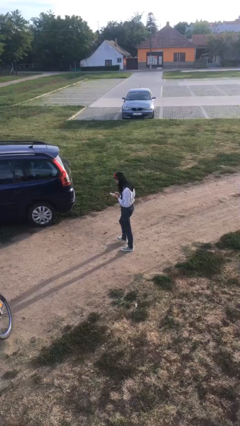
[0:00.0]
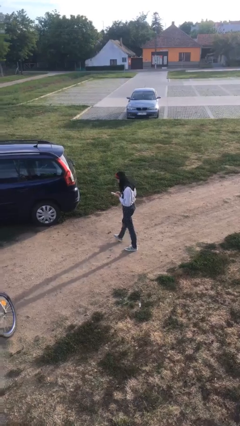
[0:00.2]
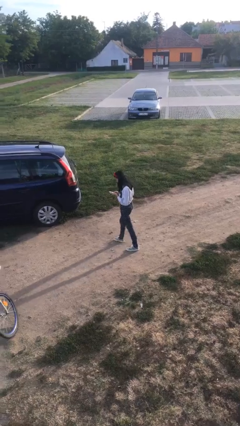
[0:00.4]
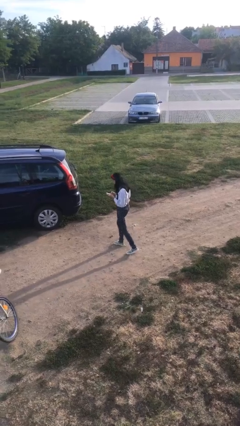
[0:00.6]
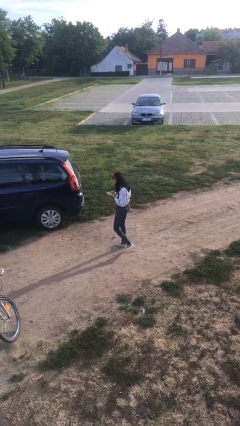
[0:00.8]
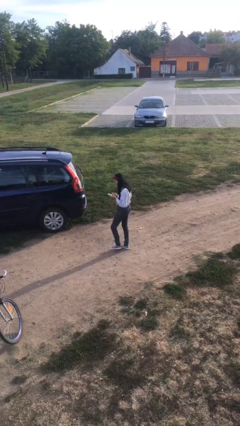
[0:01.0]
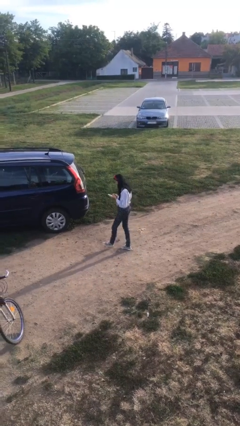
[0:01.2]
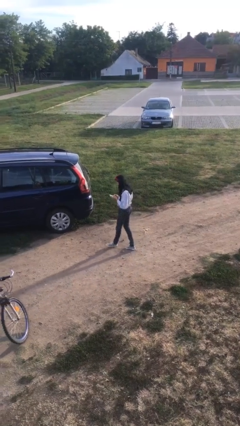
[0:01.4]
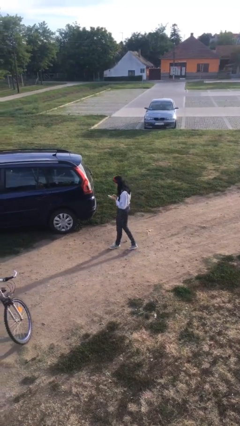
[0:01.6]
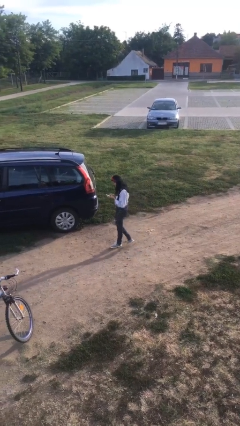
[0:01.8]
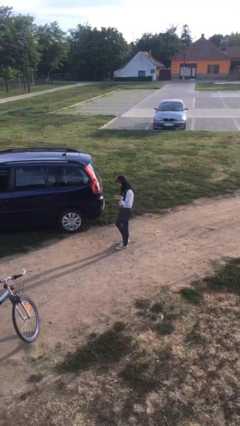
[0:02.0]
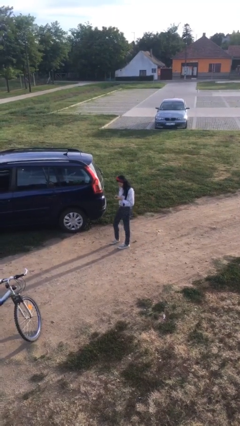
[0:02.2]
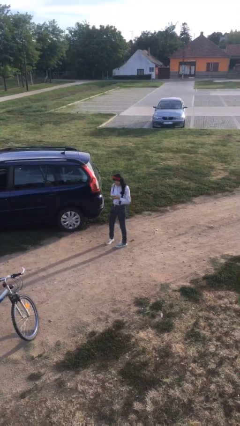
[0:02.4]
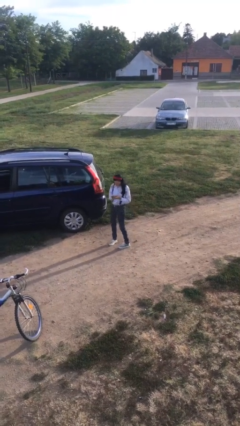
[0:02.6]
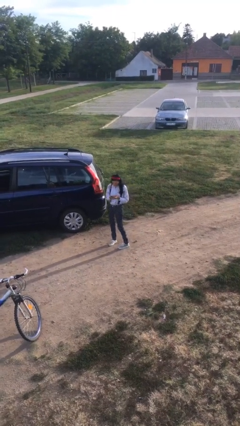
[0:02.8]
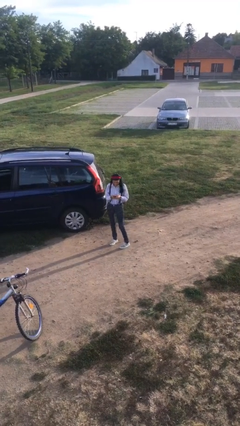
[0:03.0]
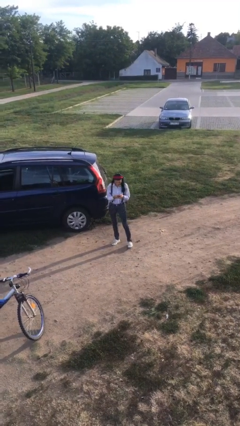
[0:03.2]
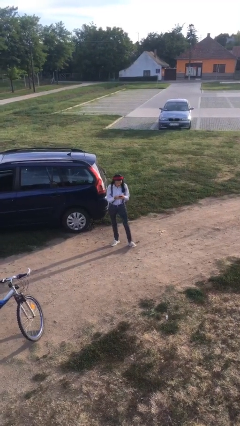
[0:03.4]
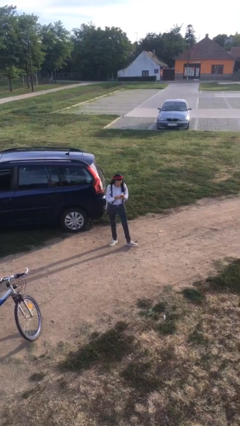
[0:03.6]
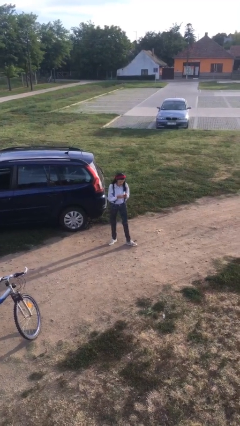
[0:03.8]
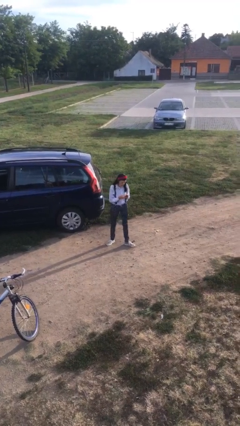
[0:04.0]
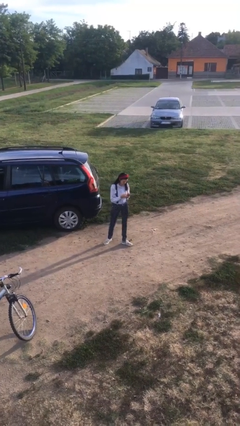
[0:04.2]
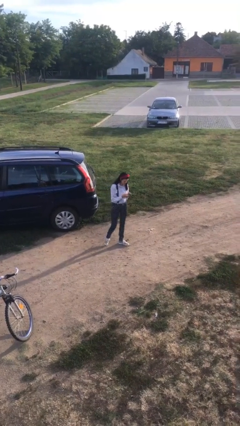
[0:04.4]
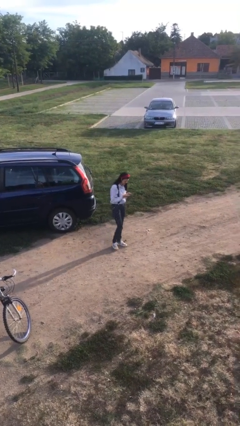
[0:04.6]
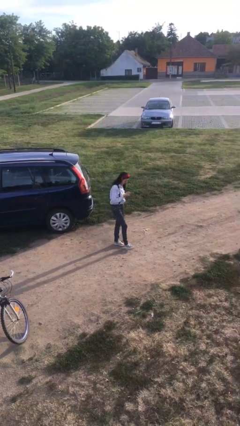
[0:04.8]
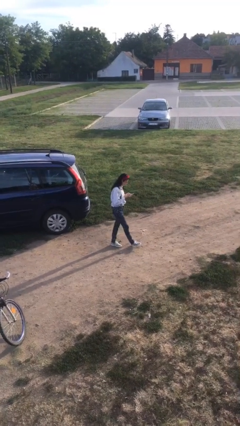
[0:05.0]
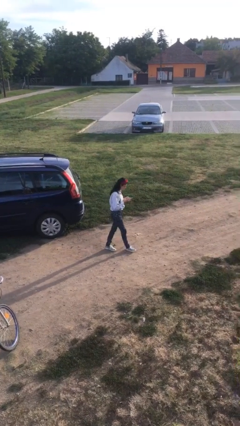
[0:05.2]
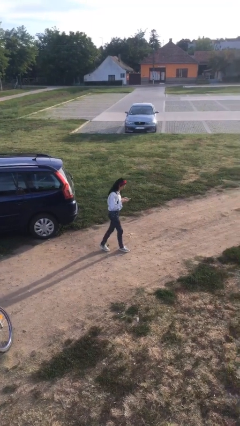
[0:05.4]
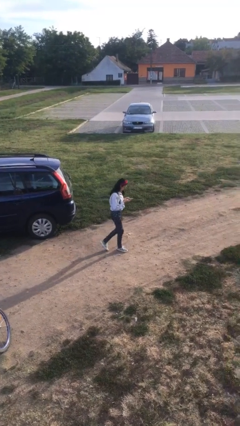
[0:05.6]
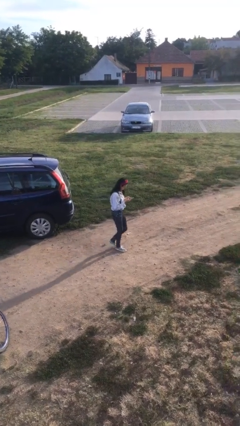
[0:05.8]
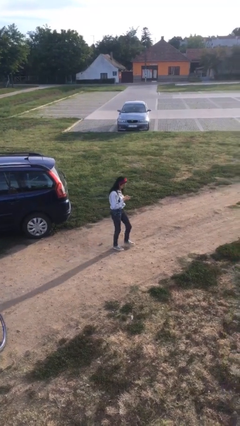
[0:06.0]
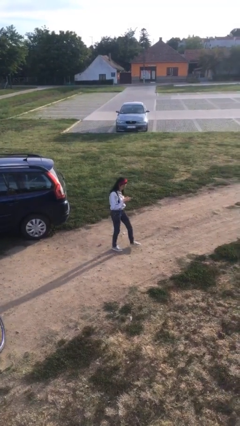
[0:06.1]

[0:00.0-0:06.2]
person texts on phone

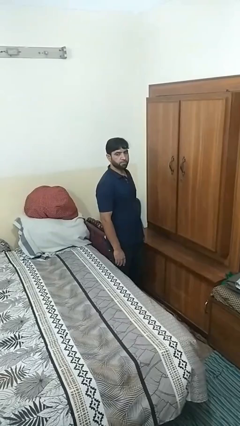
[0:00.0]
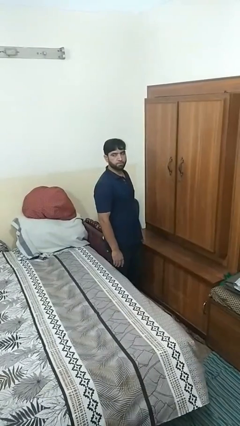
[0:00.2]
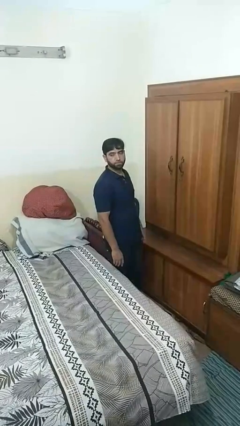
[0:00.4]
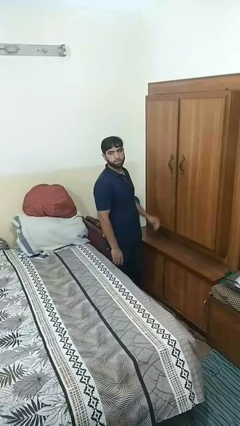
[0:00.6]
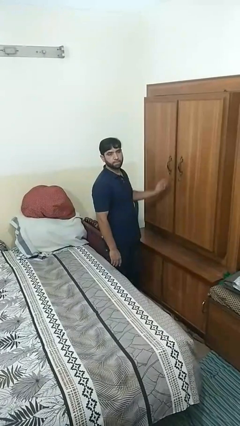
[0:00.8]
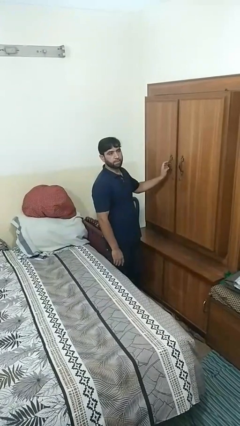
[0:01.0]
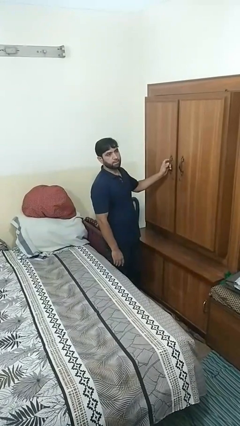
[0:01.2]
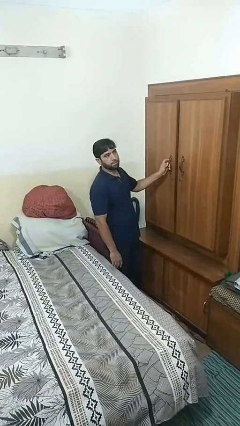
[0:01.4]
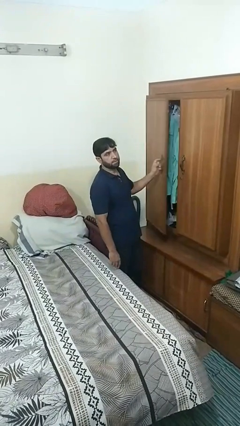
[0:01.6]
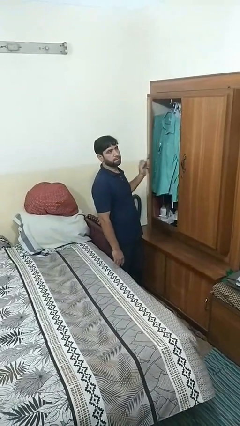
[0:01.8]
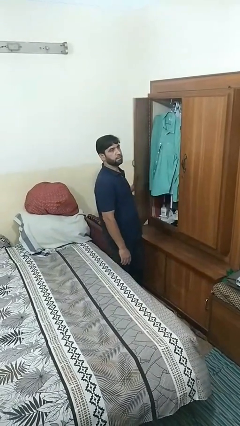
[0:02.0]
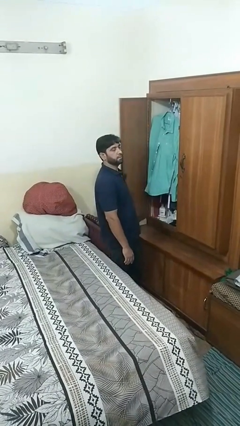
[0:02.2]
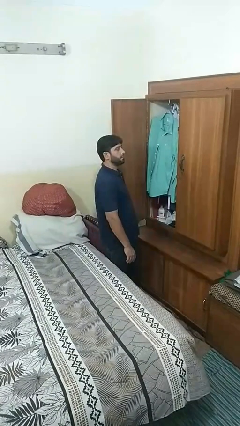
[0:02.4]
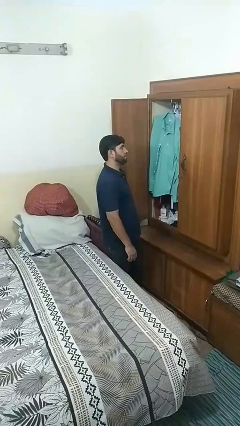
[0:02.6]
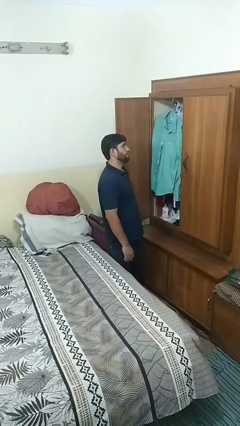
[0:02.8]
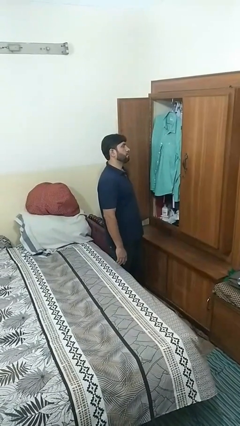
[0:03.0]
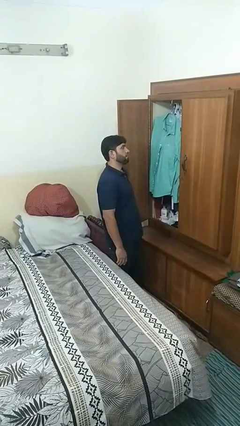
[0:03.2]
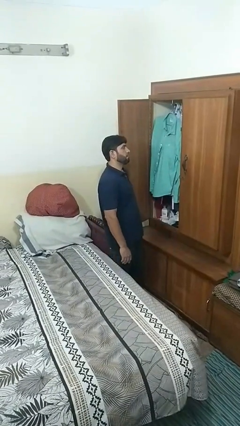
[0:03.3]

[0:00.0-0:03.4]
person opens closet door

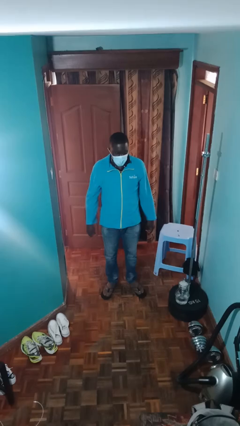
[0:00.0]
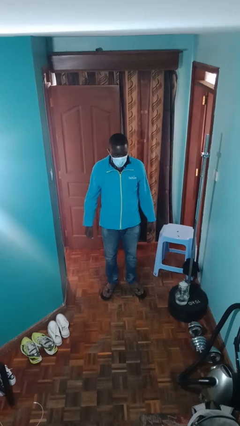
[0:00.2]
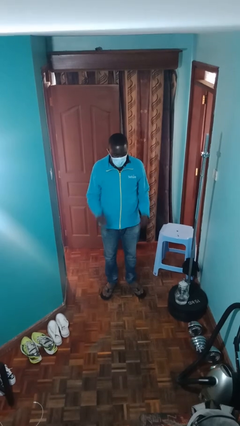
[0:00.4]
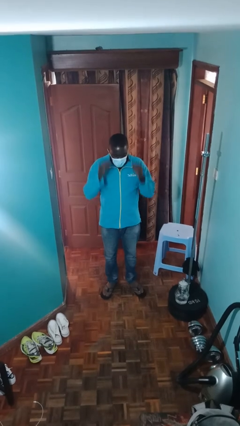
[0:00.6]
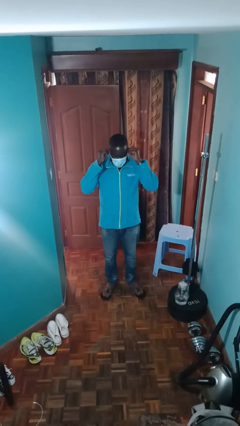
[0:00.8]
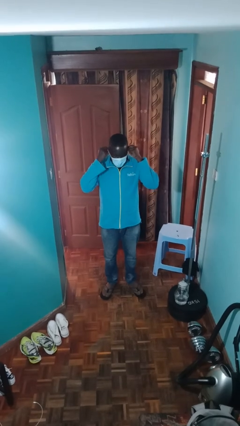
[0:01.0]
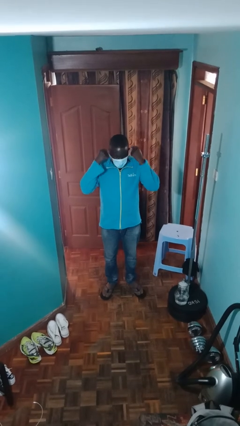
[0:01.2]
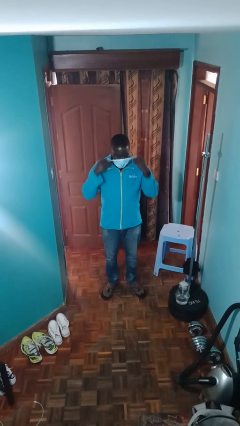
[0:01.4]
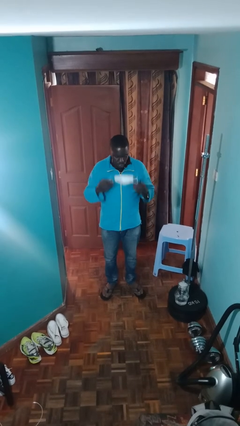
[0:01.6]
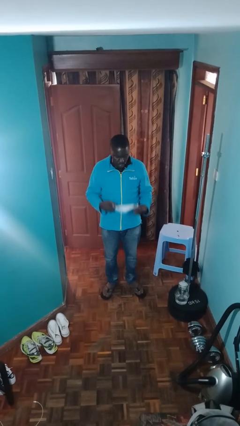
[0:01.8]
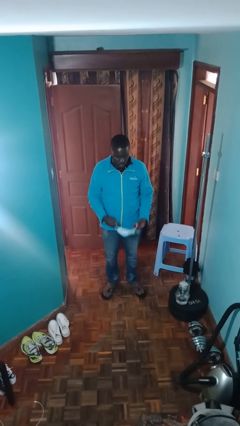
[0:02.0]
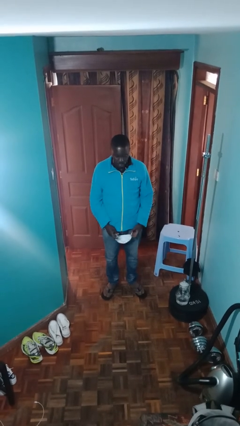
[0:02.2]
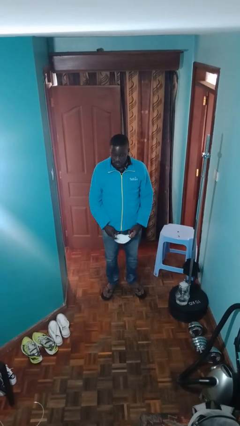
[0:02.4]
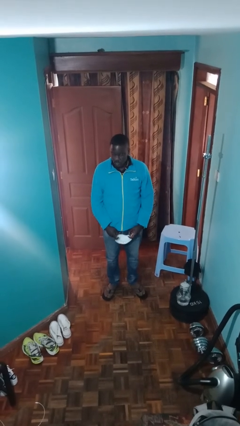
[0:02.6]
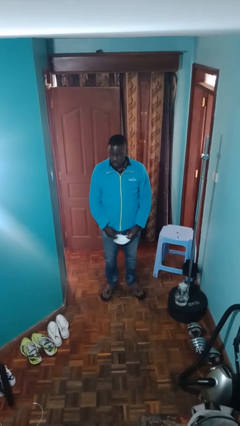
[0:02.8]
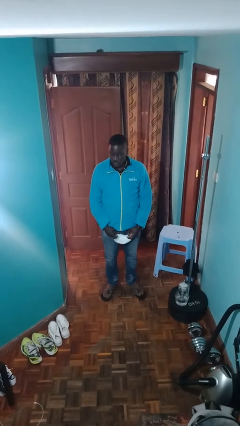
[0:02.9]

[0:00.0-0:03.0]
person takes off facemask

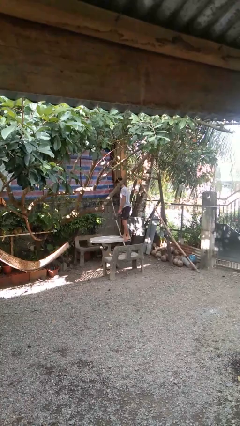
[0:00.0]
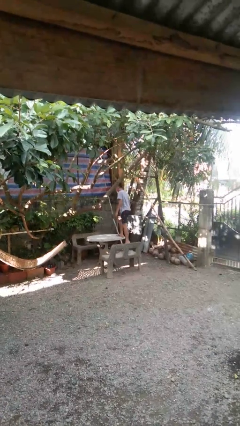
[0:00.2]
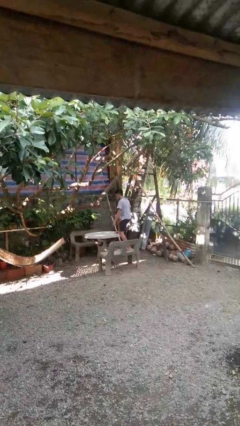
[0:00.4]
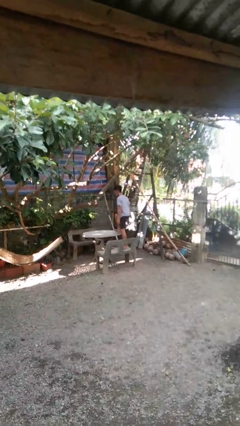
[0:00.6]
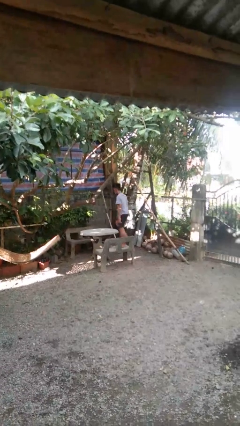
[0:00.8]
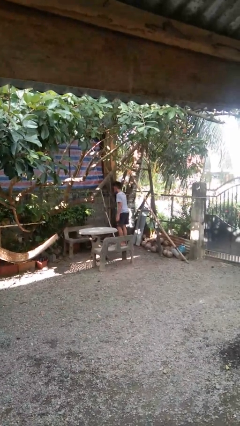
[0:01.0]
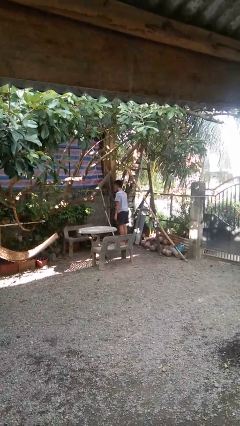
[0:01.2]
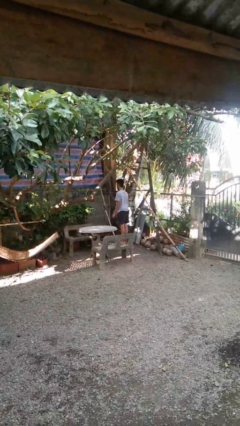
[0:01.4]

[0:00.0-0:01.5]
person climbs off table

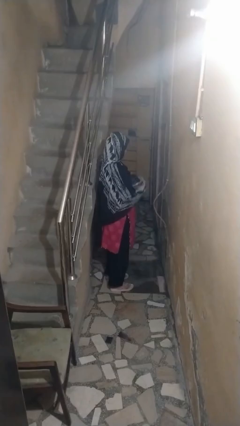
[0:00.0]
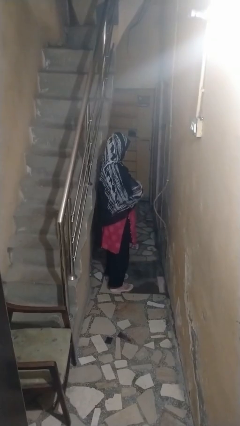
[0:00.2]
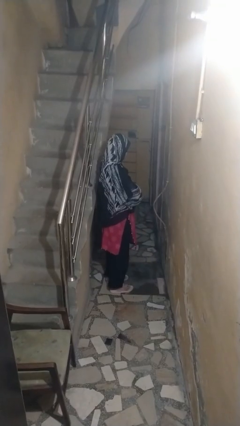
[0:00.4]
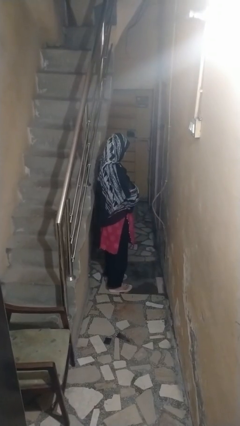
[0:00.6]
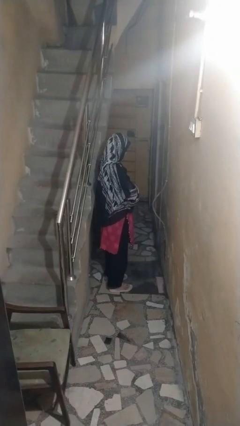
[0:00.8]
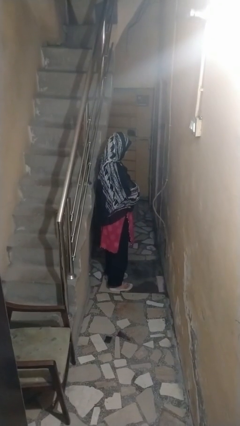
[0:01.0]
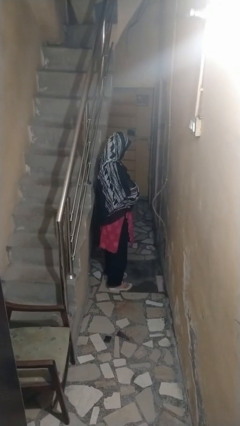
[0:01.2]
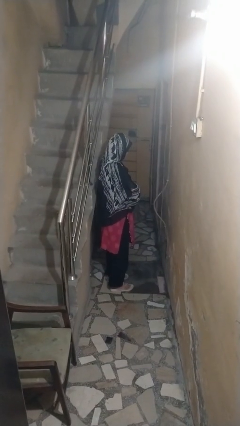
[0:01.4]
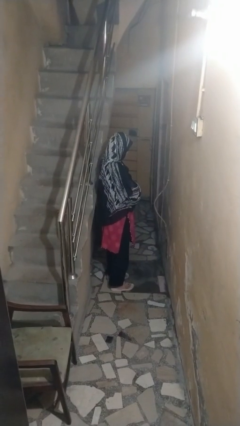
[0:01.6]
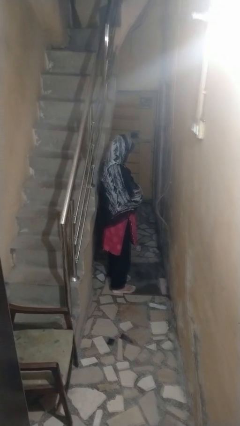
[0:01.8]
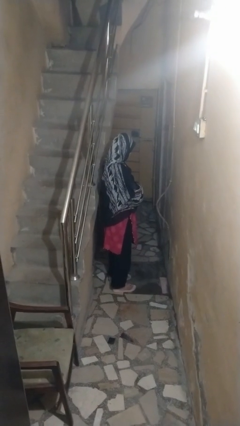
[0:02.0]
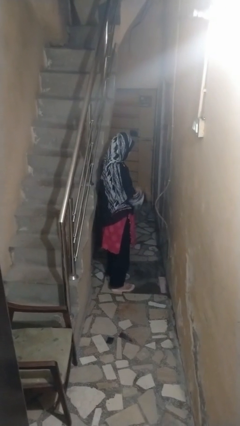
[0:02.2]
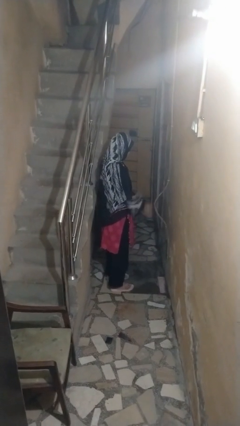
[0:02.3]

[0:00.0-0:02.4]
person crosses arms

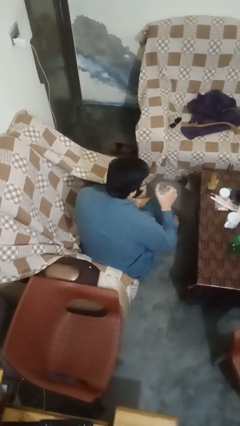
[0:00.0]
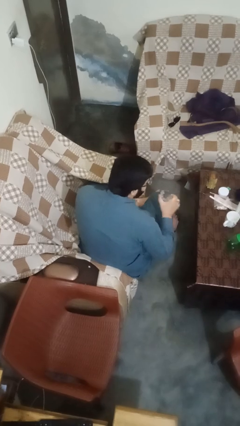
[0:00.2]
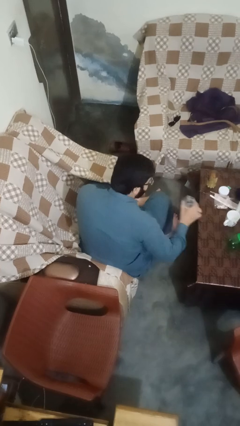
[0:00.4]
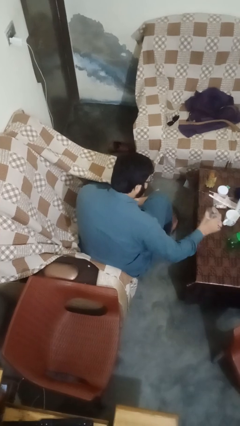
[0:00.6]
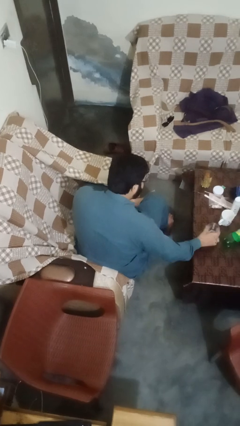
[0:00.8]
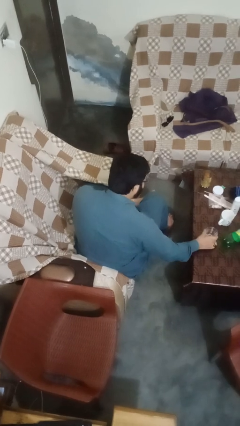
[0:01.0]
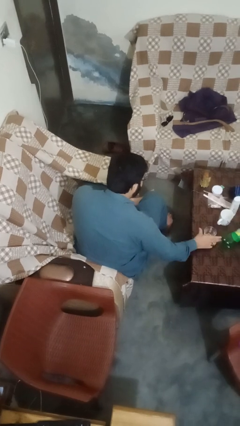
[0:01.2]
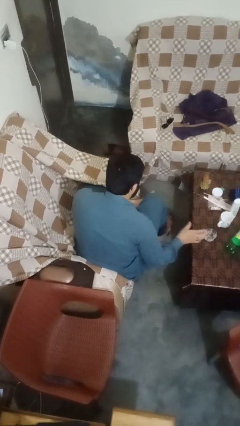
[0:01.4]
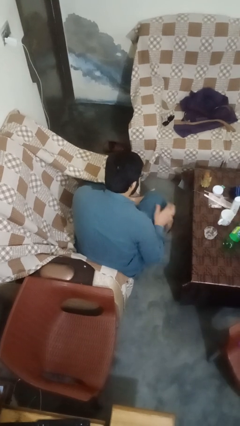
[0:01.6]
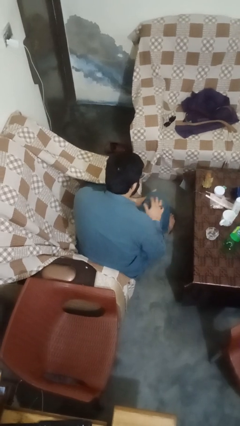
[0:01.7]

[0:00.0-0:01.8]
person puts down object on table
